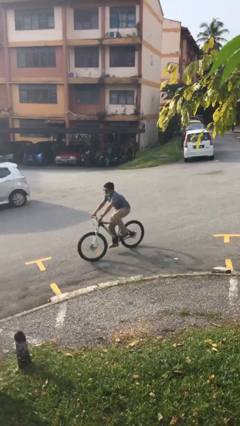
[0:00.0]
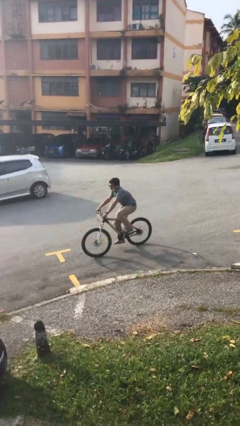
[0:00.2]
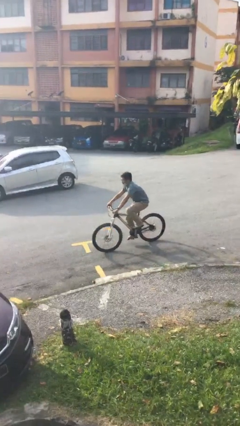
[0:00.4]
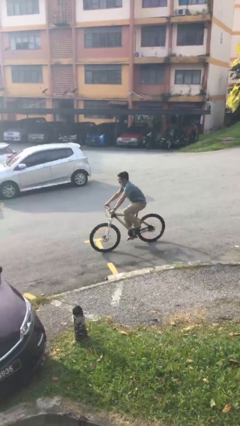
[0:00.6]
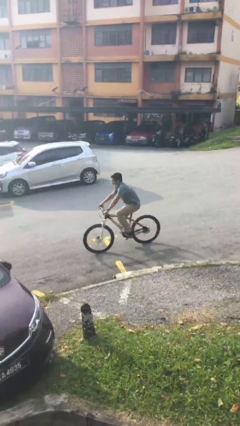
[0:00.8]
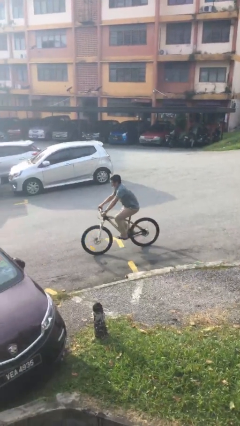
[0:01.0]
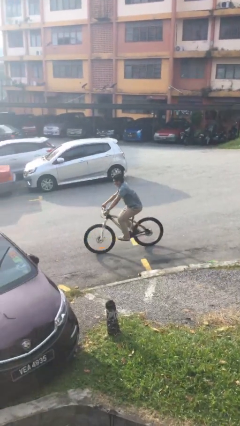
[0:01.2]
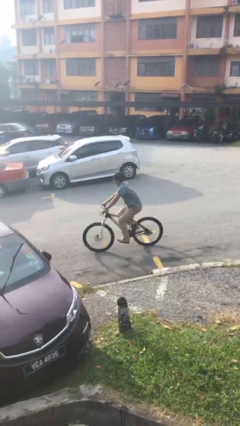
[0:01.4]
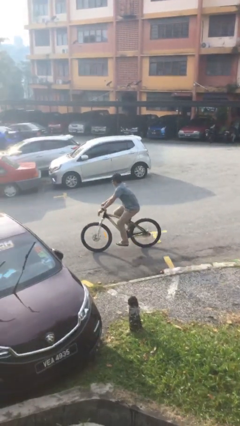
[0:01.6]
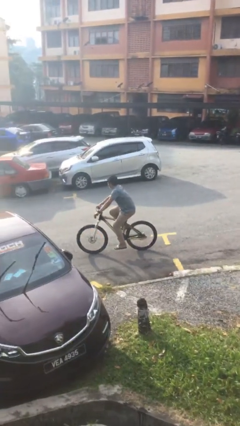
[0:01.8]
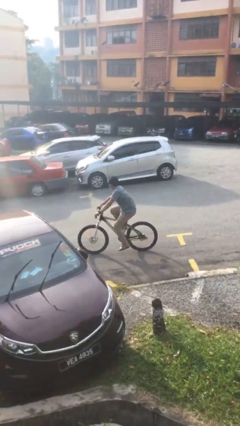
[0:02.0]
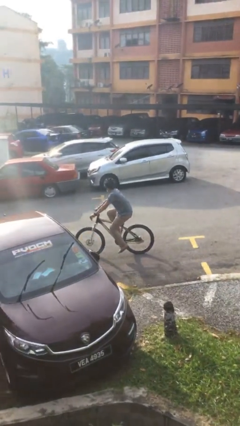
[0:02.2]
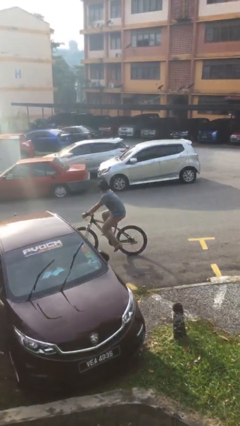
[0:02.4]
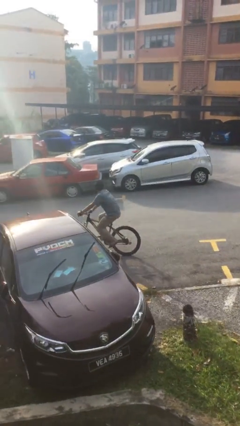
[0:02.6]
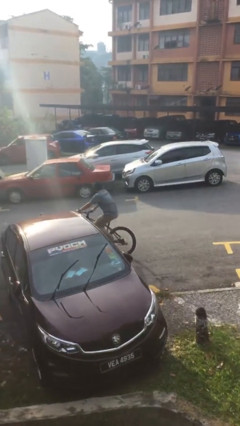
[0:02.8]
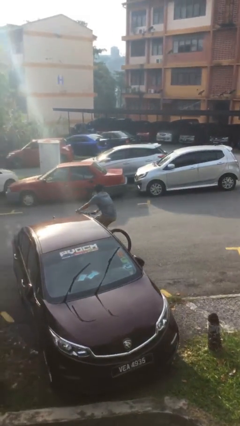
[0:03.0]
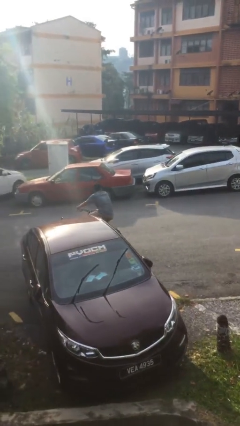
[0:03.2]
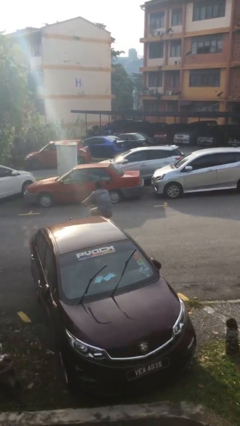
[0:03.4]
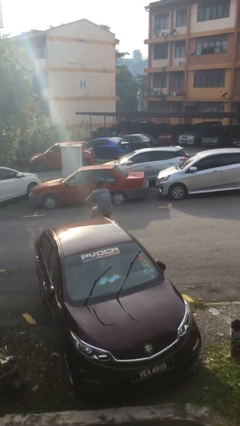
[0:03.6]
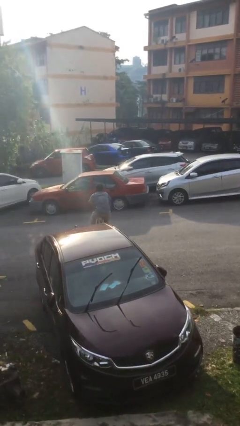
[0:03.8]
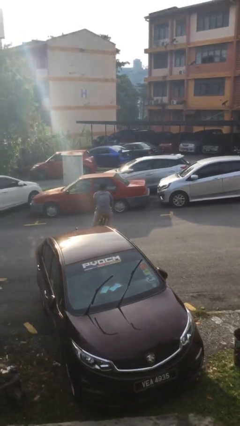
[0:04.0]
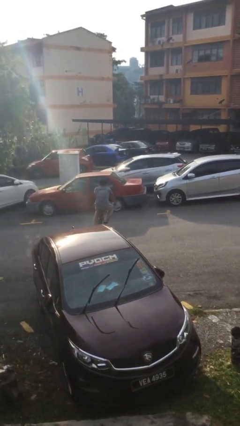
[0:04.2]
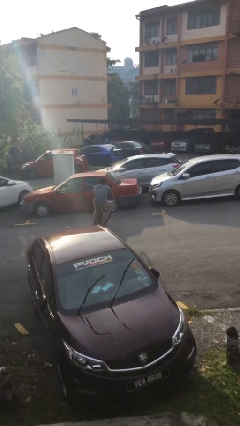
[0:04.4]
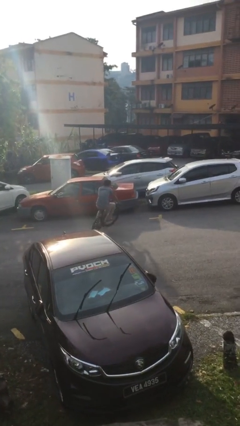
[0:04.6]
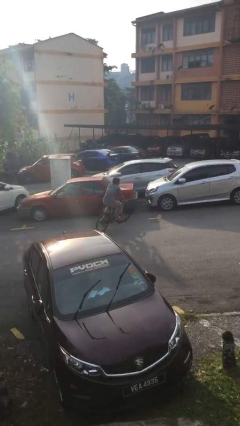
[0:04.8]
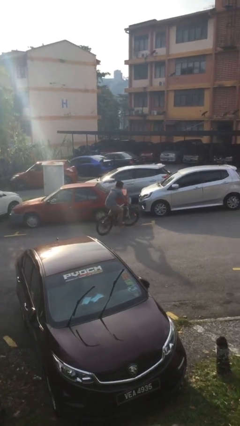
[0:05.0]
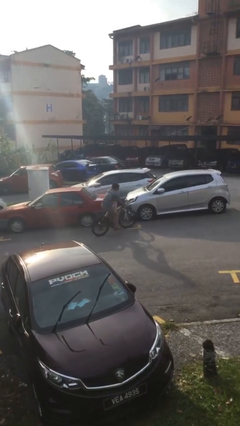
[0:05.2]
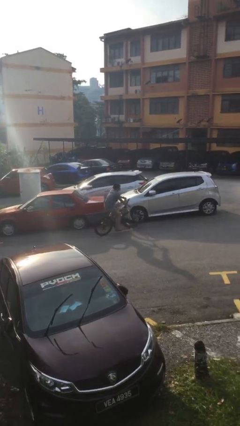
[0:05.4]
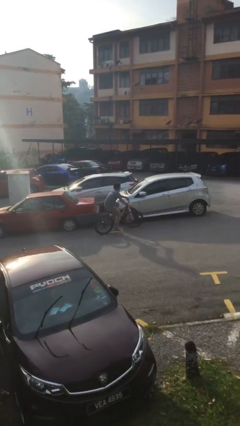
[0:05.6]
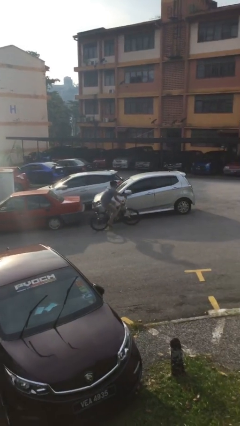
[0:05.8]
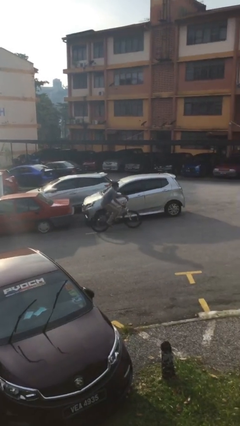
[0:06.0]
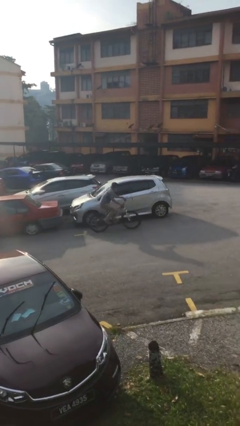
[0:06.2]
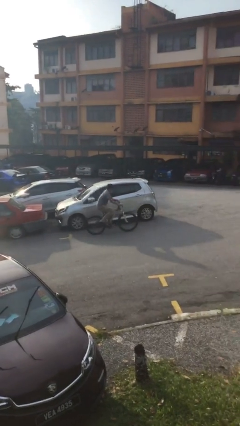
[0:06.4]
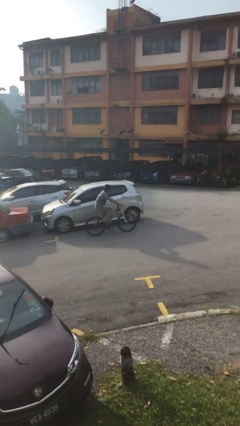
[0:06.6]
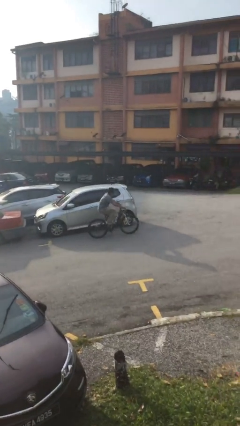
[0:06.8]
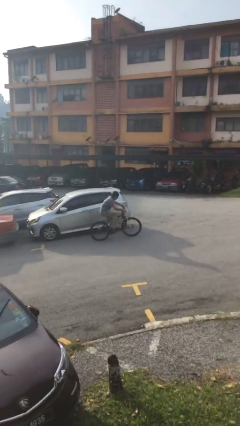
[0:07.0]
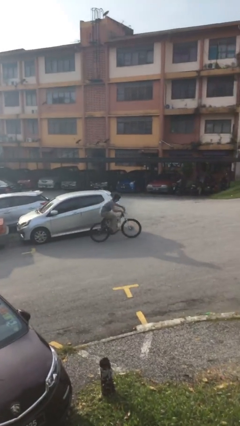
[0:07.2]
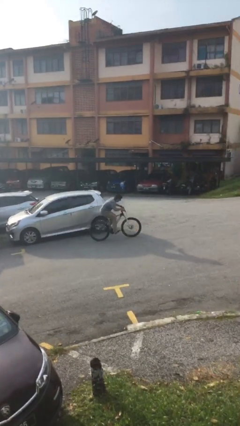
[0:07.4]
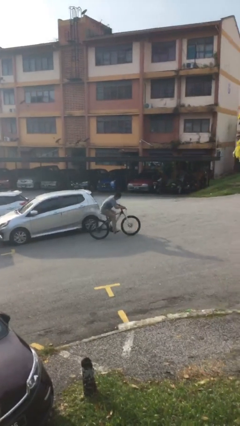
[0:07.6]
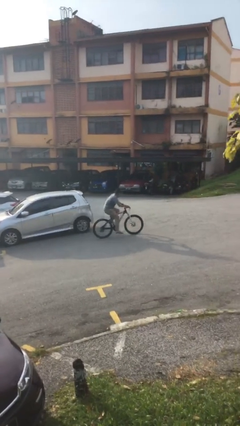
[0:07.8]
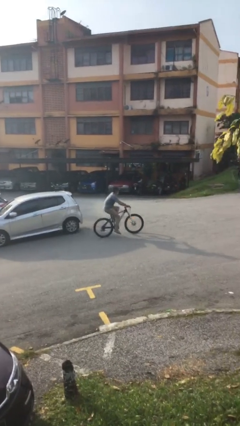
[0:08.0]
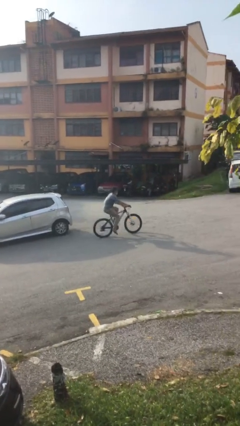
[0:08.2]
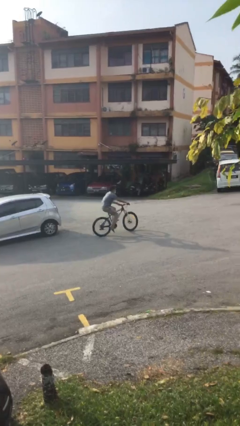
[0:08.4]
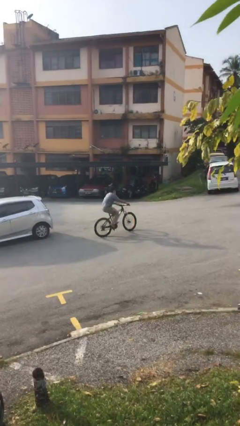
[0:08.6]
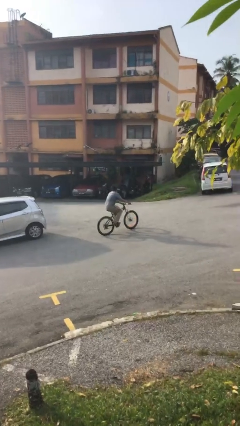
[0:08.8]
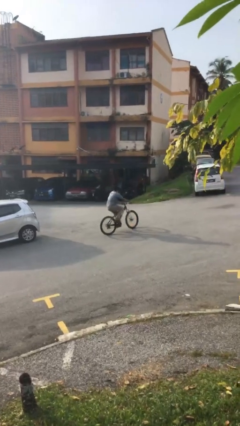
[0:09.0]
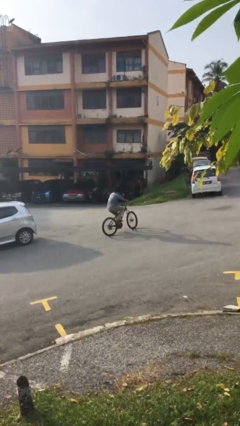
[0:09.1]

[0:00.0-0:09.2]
person rides bicycle

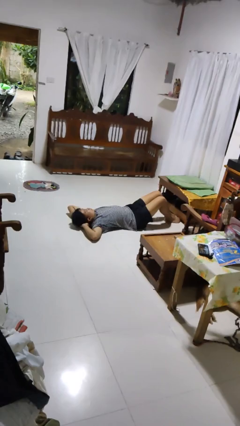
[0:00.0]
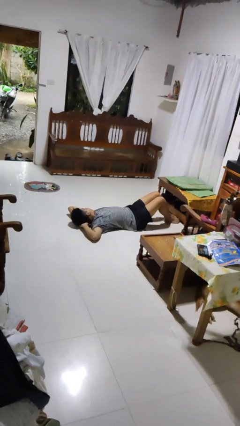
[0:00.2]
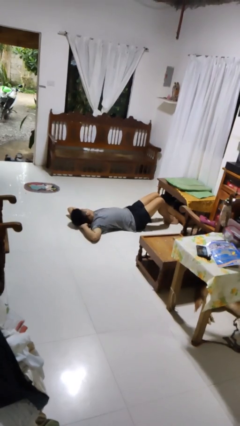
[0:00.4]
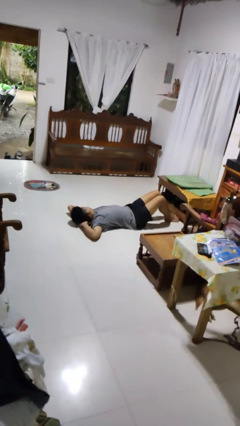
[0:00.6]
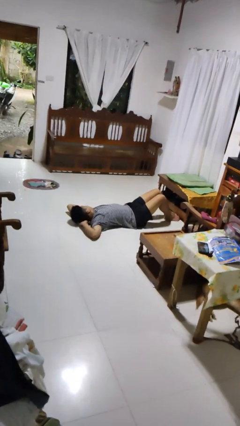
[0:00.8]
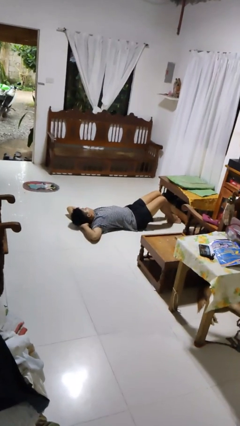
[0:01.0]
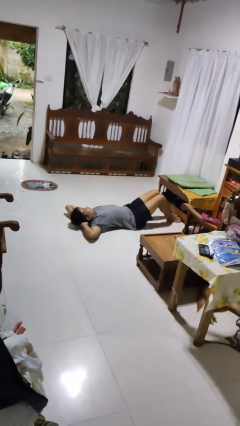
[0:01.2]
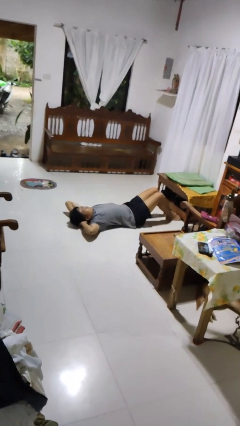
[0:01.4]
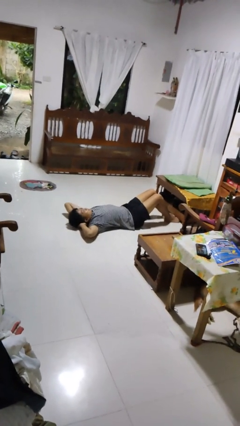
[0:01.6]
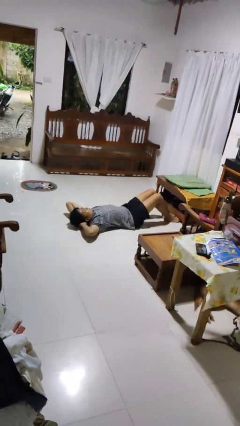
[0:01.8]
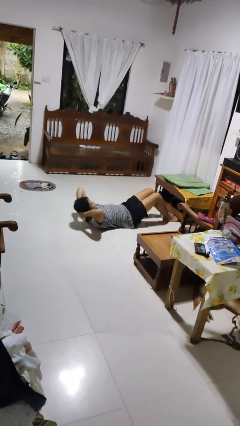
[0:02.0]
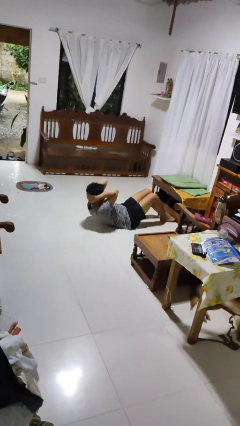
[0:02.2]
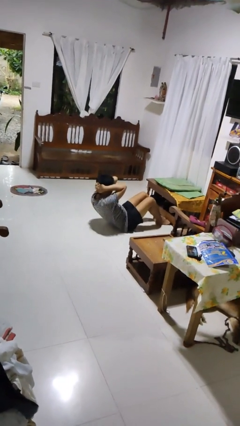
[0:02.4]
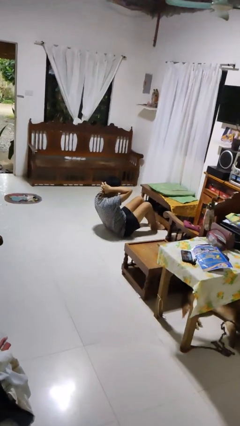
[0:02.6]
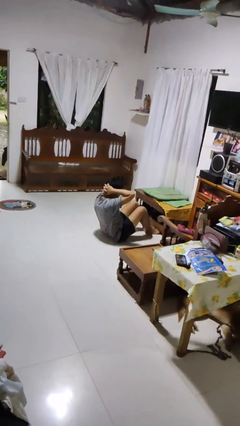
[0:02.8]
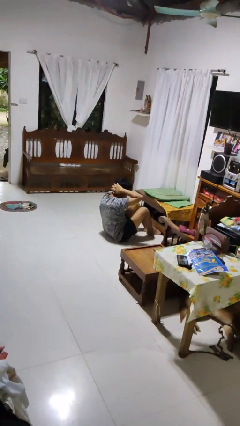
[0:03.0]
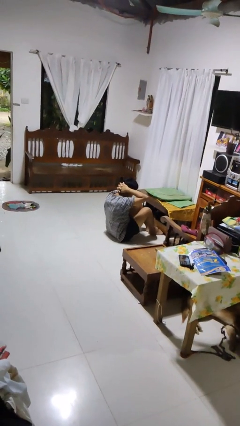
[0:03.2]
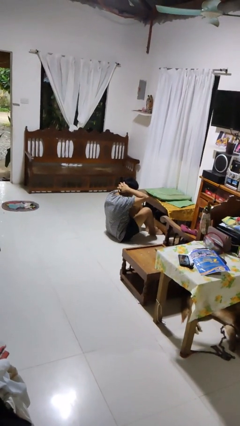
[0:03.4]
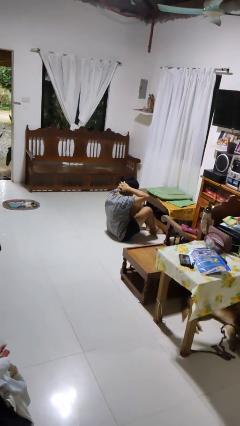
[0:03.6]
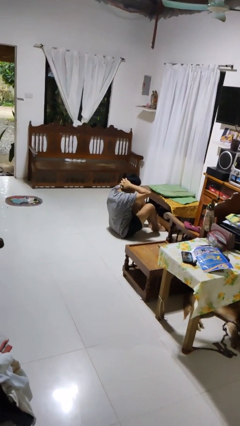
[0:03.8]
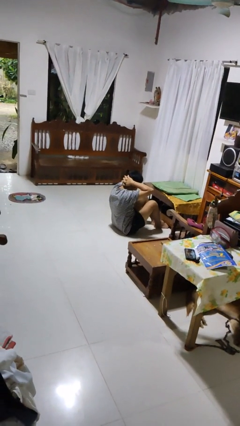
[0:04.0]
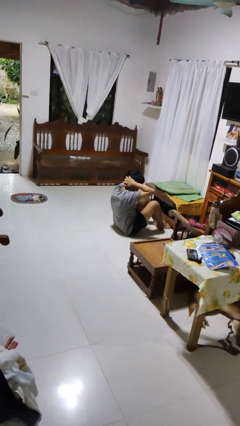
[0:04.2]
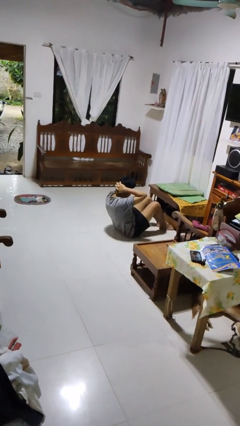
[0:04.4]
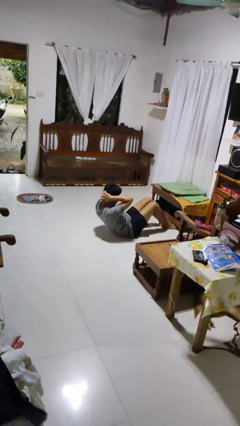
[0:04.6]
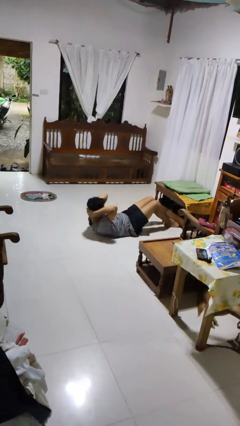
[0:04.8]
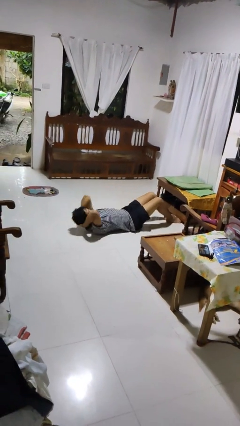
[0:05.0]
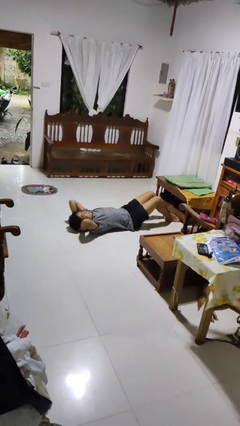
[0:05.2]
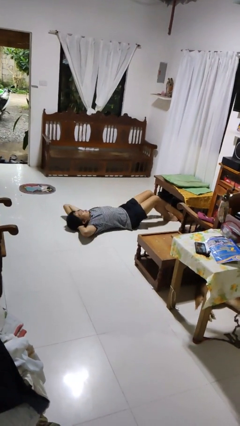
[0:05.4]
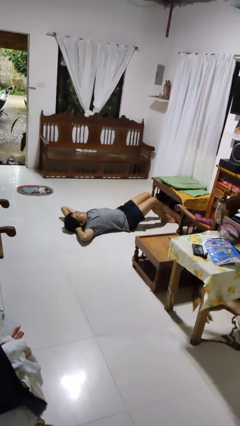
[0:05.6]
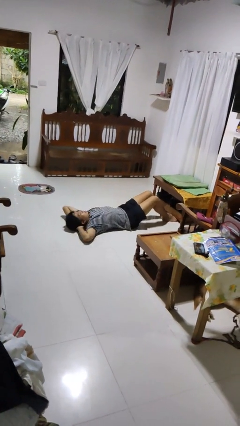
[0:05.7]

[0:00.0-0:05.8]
person exercises with situp

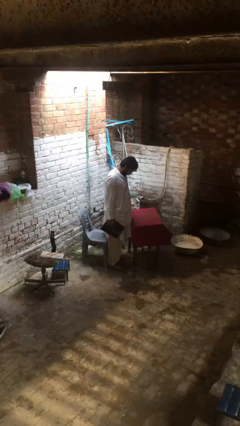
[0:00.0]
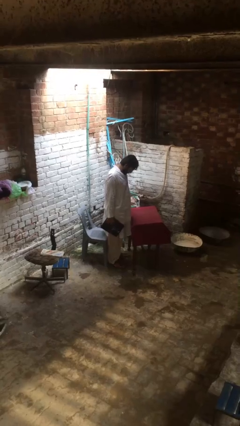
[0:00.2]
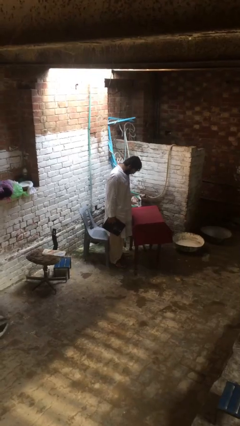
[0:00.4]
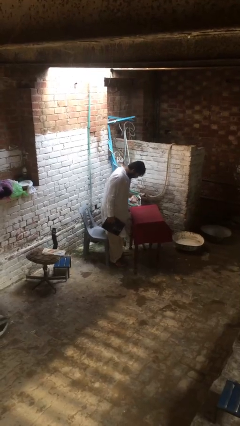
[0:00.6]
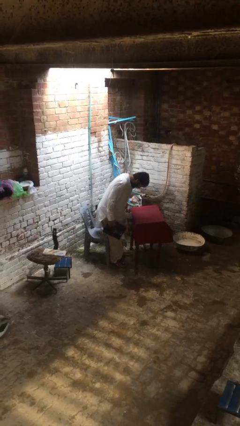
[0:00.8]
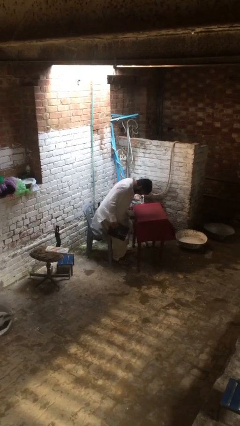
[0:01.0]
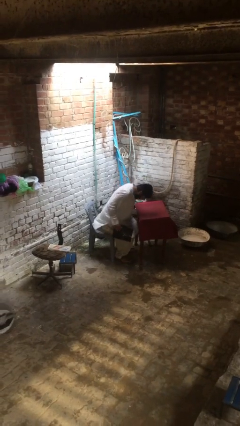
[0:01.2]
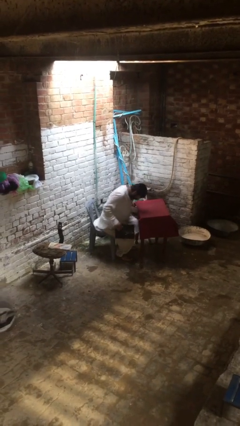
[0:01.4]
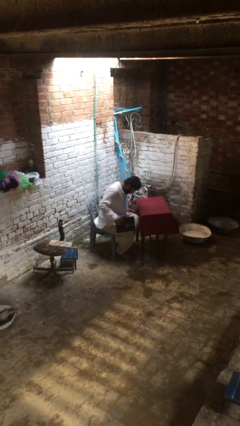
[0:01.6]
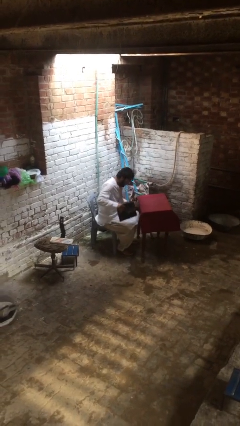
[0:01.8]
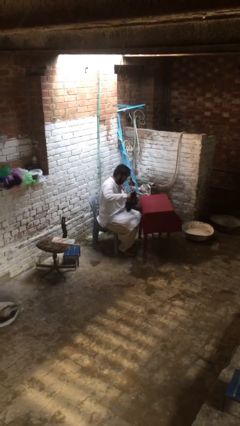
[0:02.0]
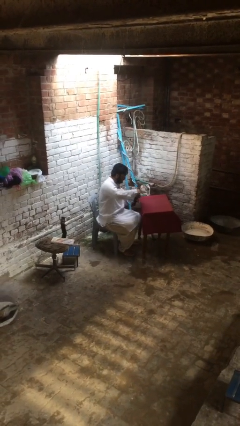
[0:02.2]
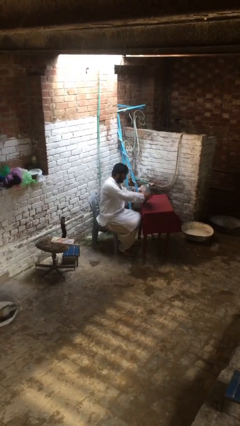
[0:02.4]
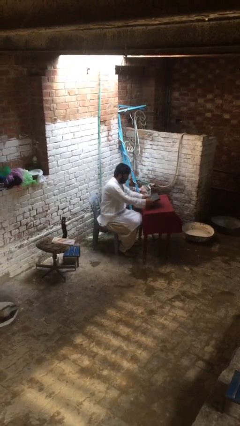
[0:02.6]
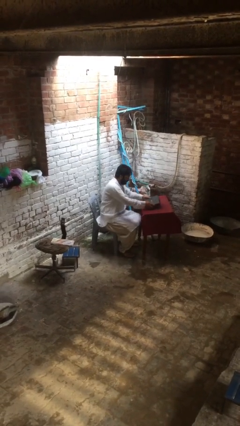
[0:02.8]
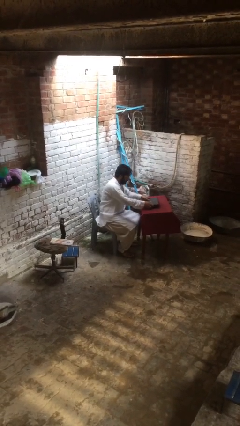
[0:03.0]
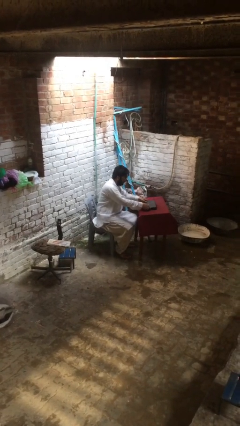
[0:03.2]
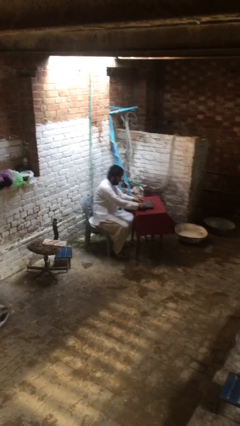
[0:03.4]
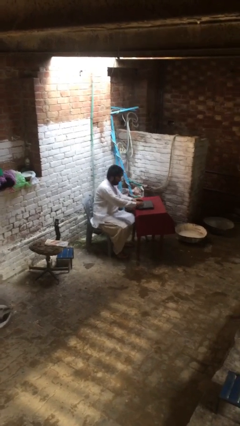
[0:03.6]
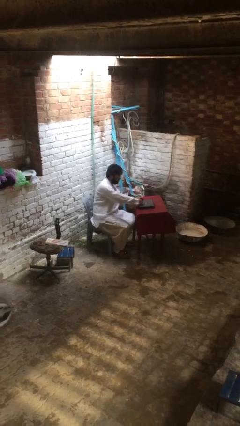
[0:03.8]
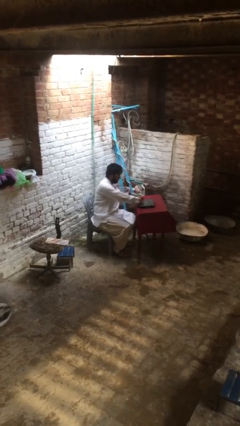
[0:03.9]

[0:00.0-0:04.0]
person sits down
